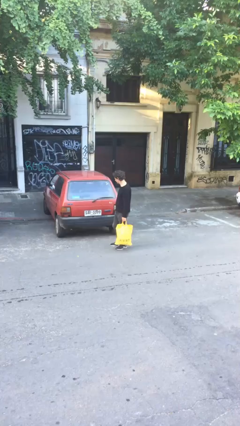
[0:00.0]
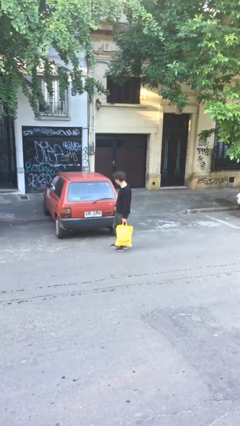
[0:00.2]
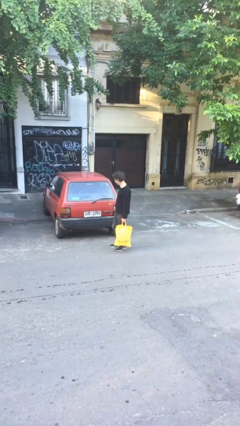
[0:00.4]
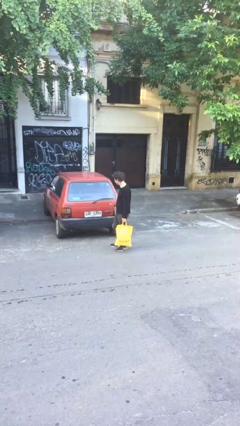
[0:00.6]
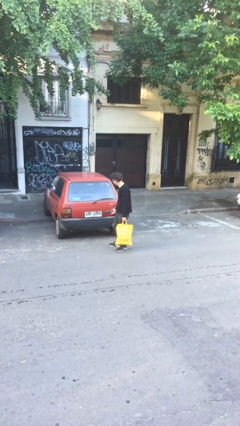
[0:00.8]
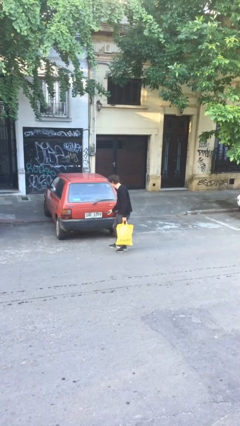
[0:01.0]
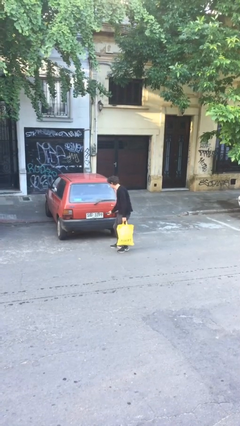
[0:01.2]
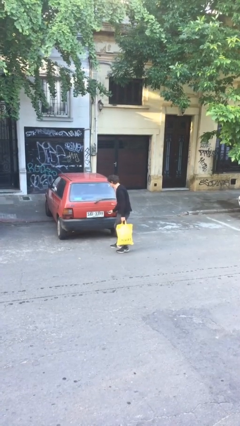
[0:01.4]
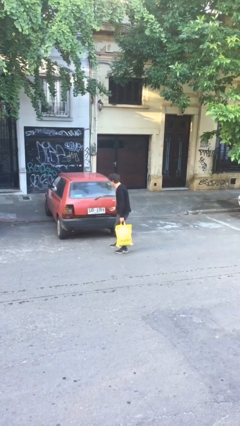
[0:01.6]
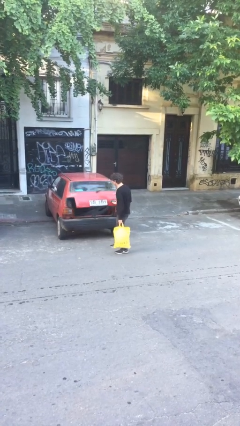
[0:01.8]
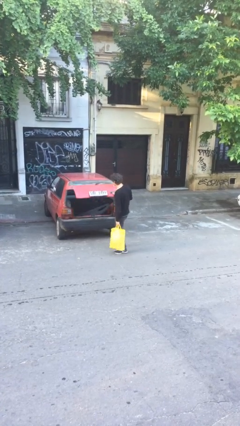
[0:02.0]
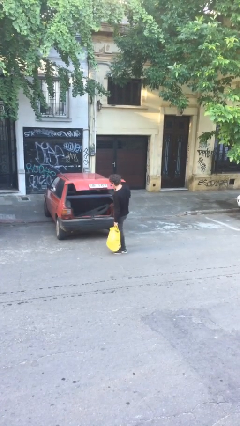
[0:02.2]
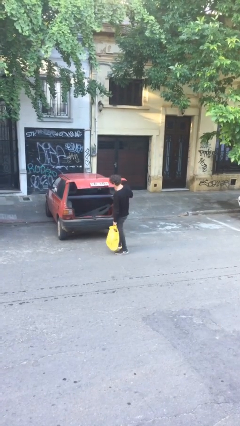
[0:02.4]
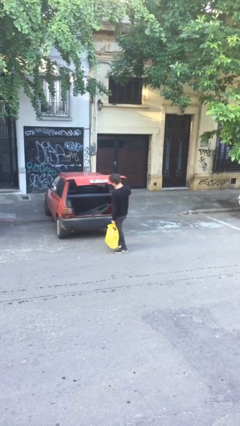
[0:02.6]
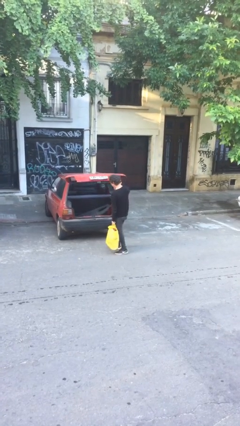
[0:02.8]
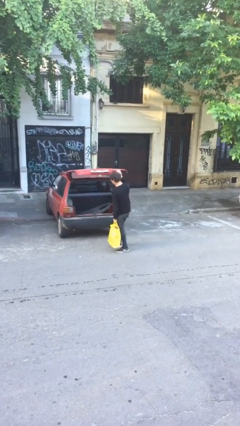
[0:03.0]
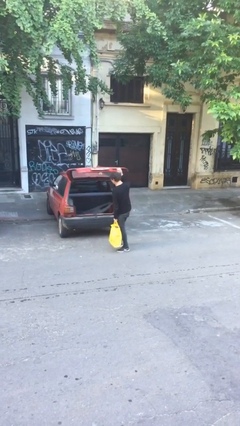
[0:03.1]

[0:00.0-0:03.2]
person opens car trunk

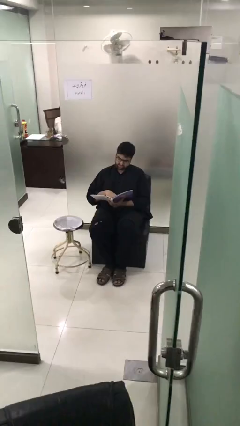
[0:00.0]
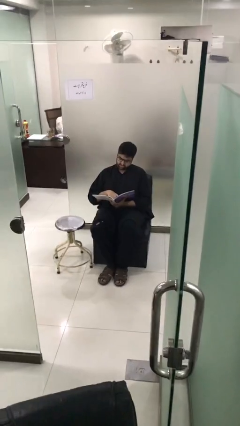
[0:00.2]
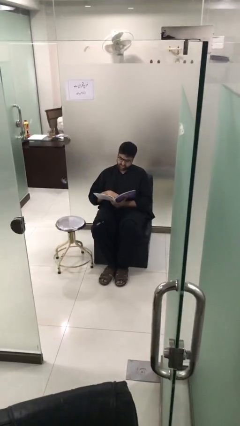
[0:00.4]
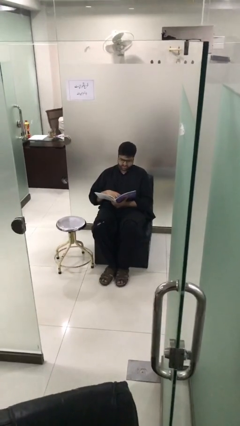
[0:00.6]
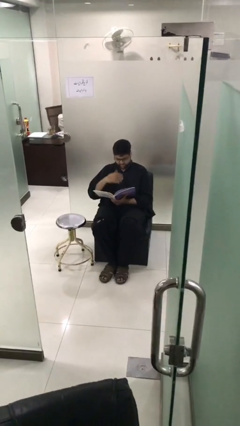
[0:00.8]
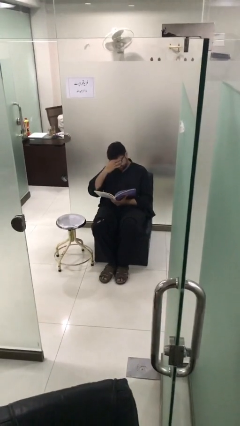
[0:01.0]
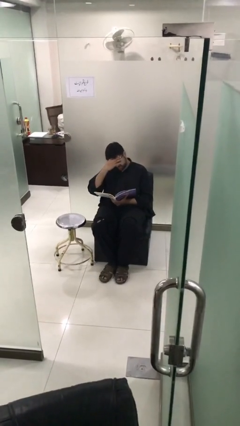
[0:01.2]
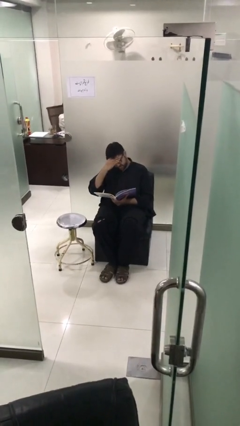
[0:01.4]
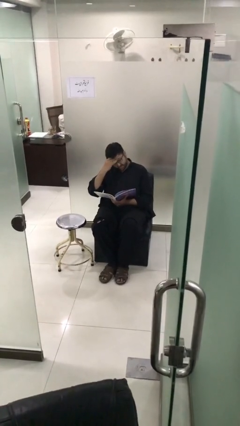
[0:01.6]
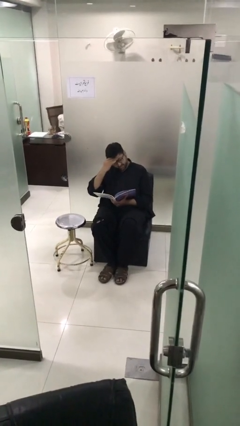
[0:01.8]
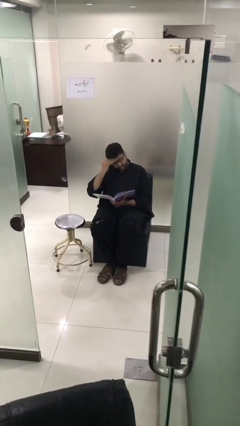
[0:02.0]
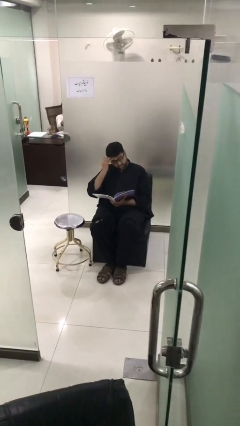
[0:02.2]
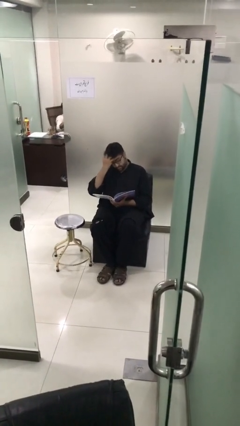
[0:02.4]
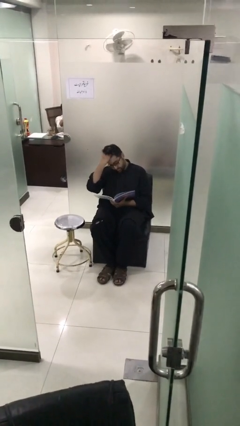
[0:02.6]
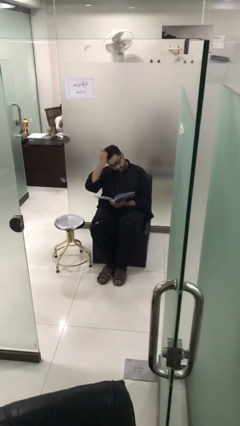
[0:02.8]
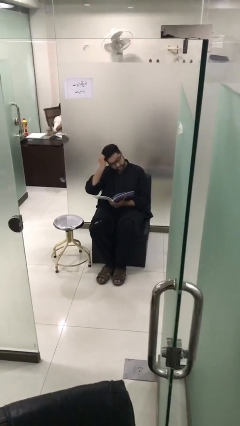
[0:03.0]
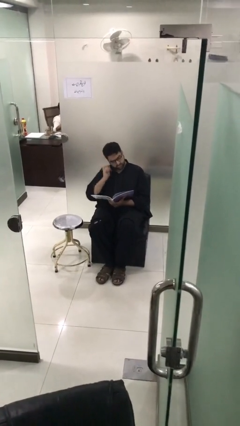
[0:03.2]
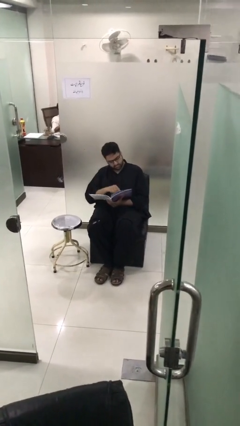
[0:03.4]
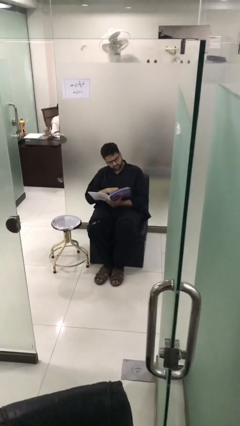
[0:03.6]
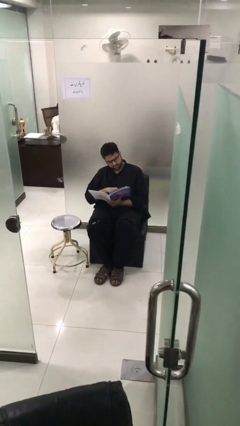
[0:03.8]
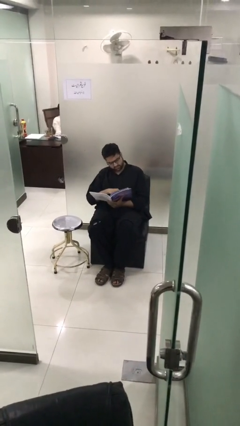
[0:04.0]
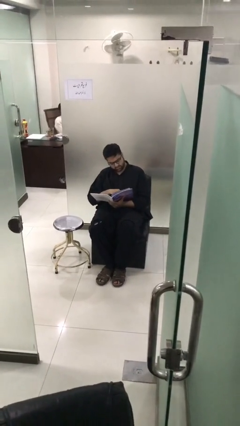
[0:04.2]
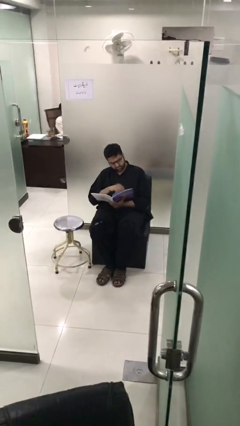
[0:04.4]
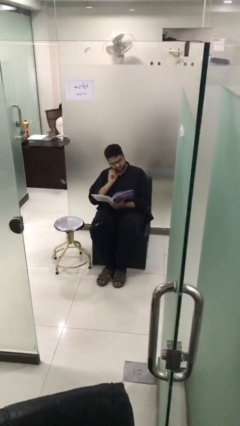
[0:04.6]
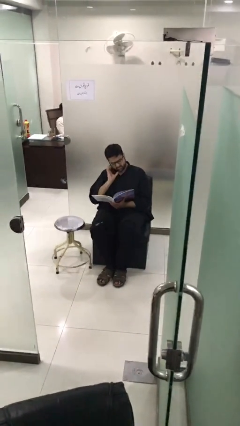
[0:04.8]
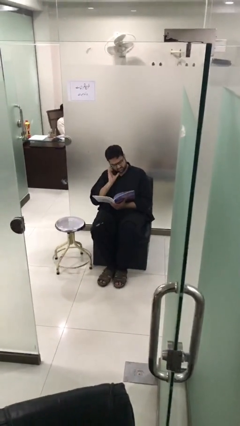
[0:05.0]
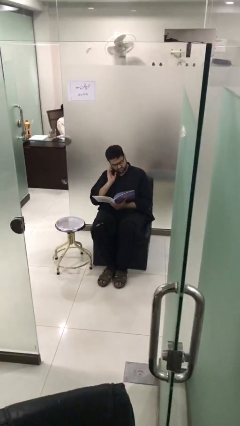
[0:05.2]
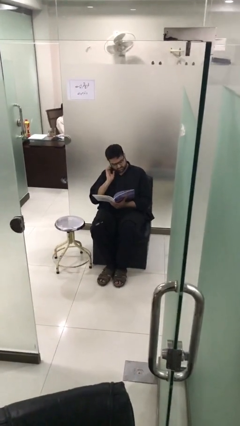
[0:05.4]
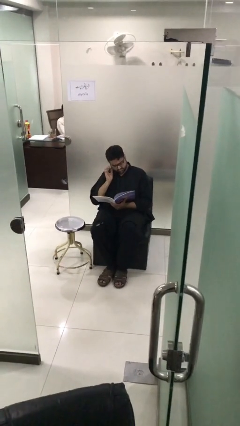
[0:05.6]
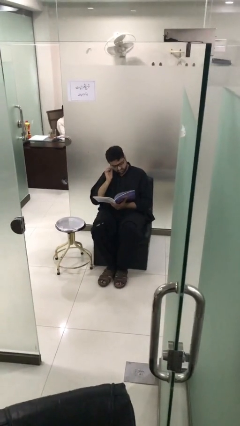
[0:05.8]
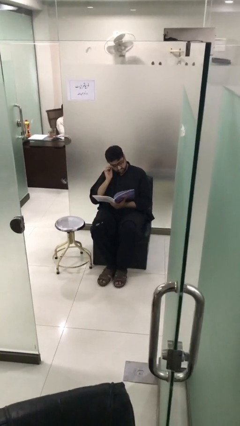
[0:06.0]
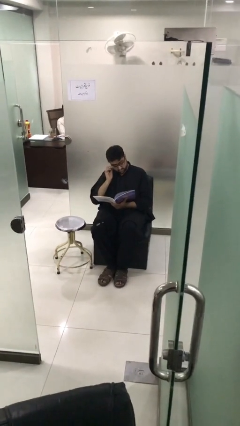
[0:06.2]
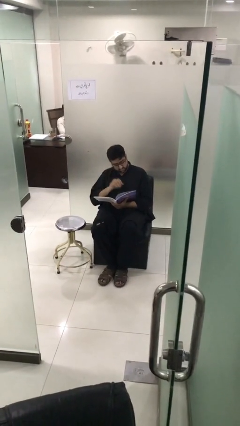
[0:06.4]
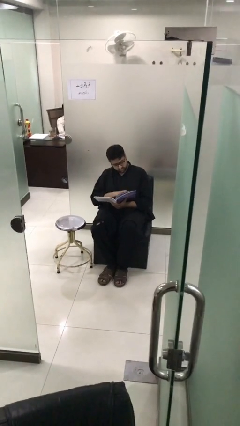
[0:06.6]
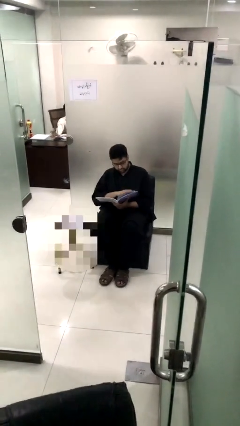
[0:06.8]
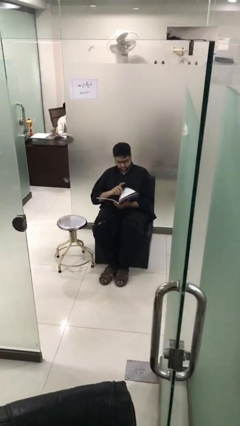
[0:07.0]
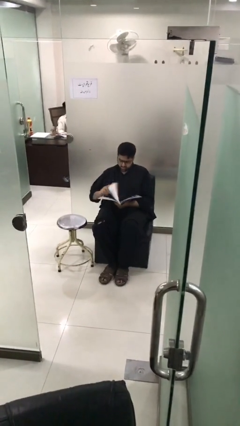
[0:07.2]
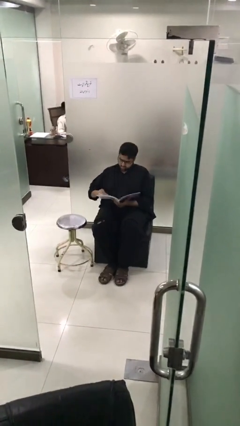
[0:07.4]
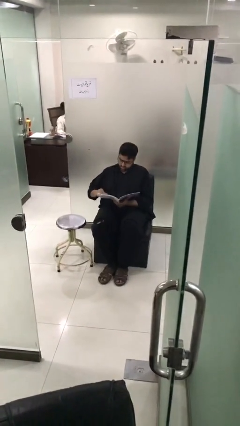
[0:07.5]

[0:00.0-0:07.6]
person reads document

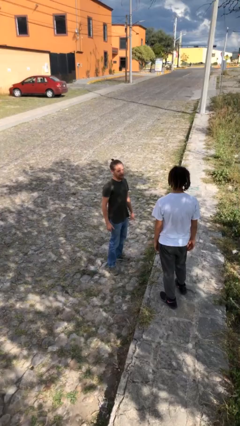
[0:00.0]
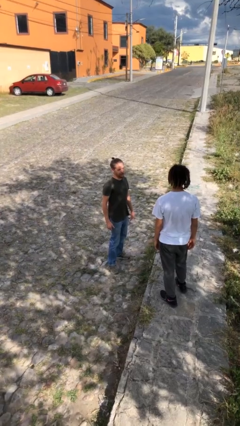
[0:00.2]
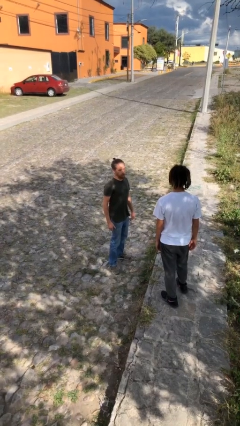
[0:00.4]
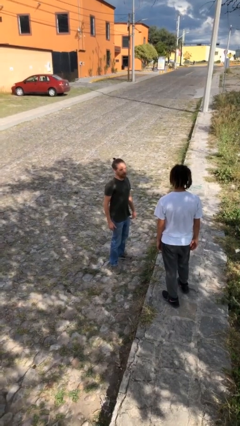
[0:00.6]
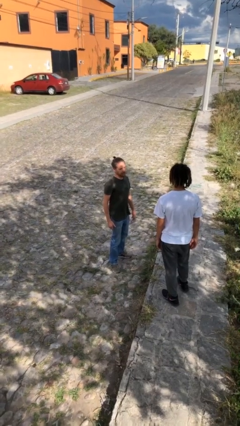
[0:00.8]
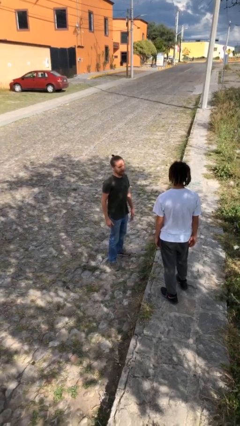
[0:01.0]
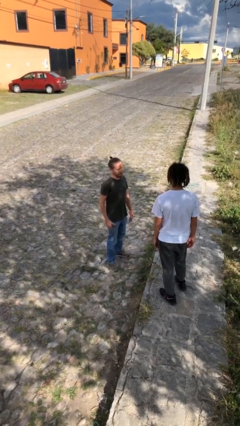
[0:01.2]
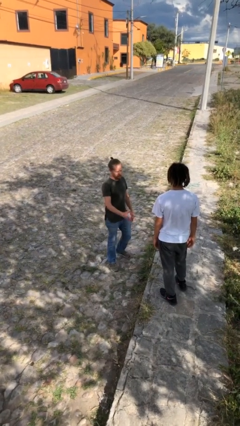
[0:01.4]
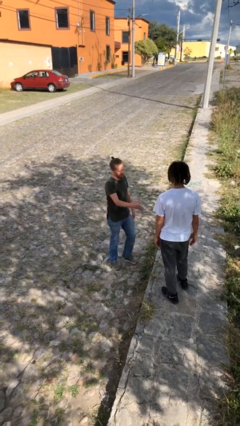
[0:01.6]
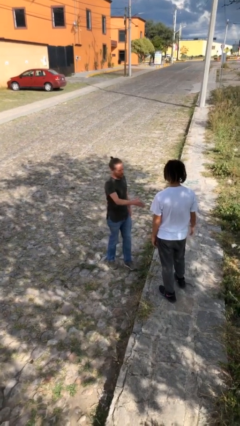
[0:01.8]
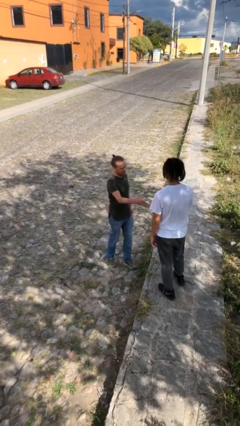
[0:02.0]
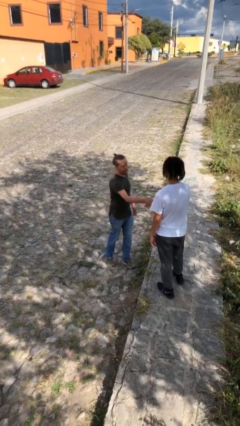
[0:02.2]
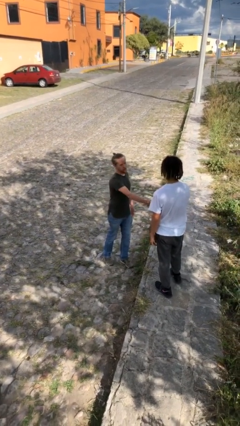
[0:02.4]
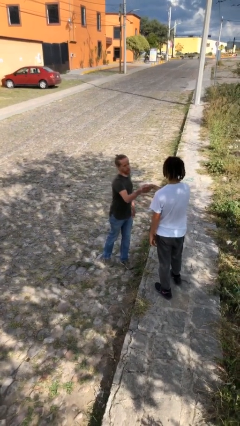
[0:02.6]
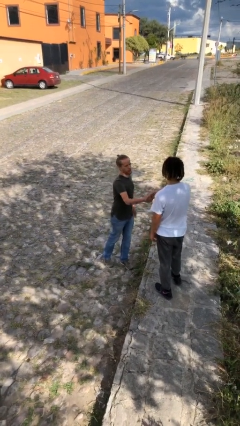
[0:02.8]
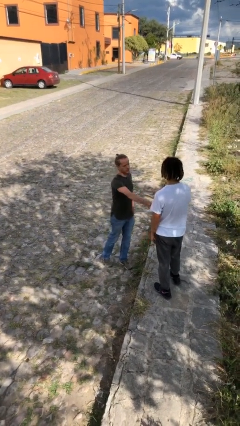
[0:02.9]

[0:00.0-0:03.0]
person shakes hand

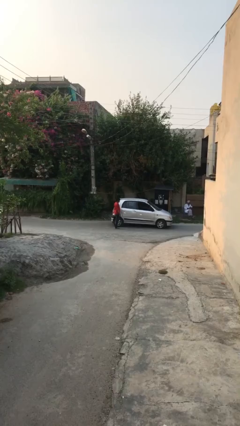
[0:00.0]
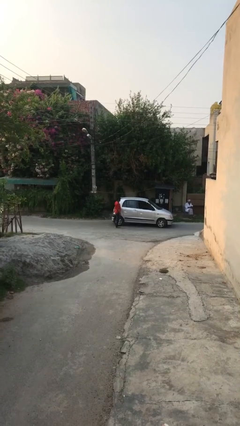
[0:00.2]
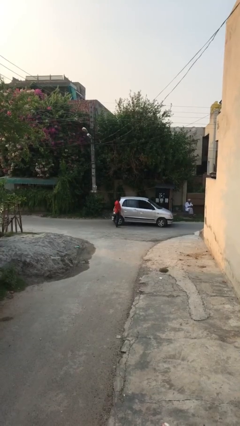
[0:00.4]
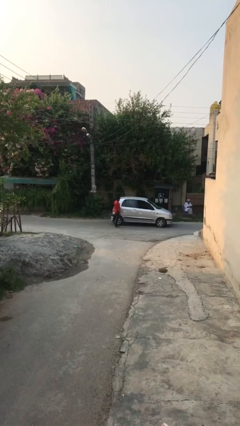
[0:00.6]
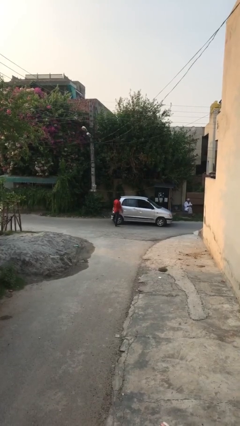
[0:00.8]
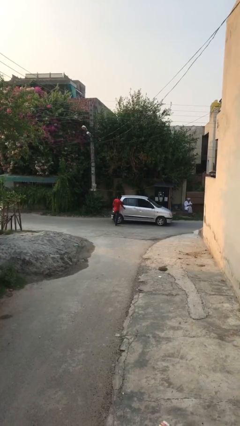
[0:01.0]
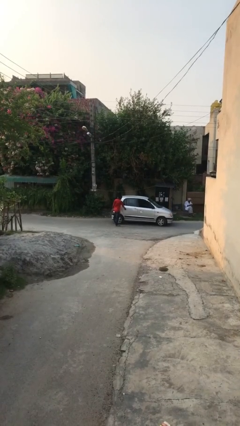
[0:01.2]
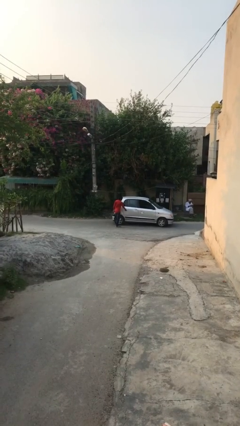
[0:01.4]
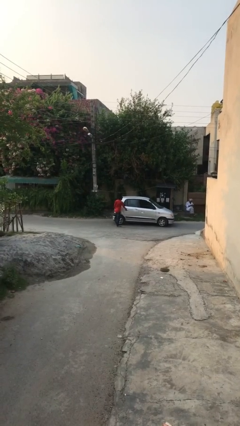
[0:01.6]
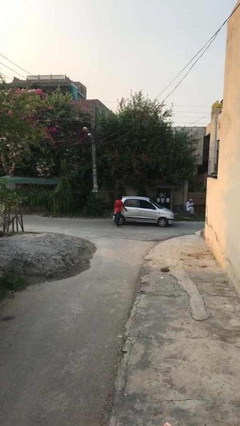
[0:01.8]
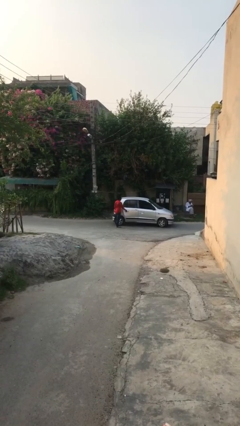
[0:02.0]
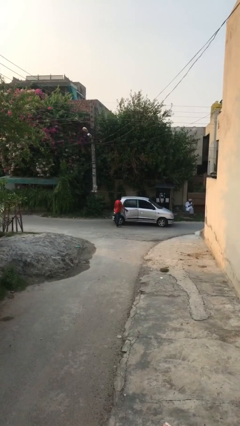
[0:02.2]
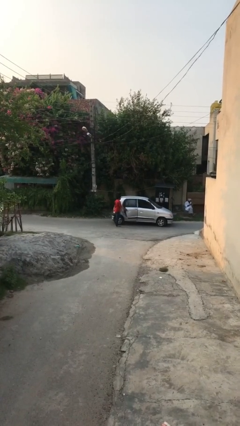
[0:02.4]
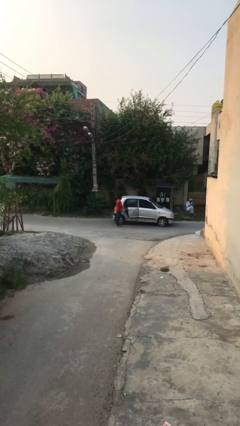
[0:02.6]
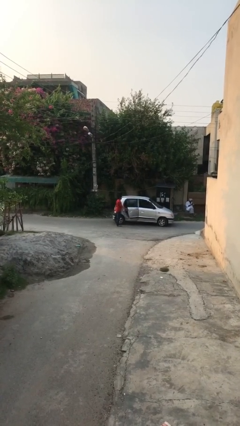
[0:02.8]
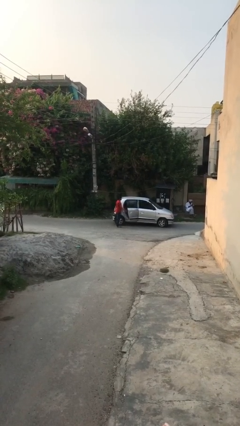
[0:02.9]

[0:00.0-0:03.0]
person opens car door

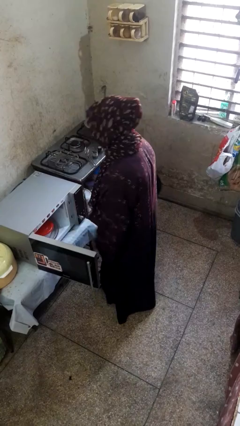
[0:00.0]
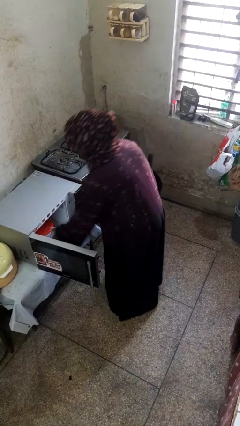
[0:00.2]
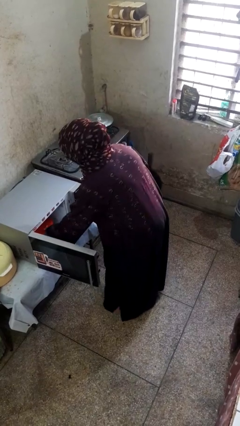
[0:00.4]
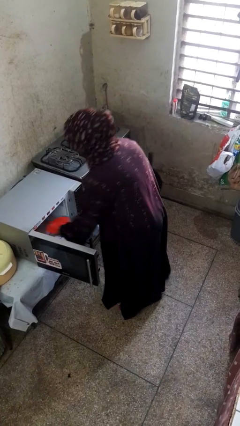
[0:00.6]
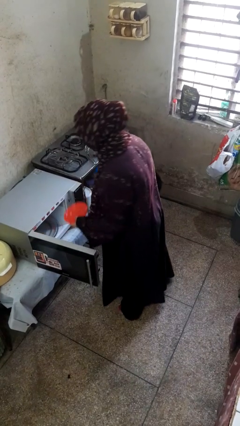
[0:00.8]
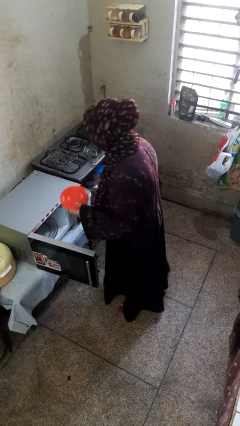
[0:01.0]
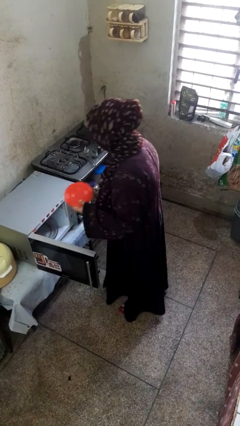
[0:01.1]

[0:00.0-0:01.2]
person takes object from microwave
